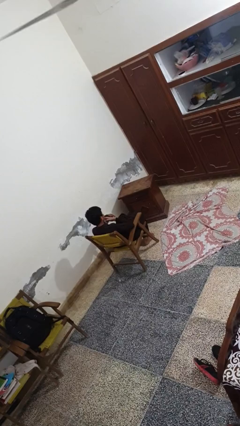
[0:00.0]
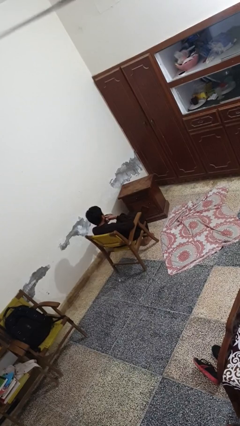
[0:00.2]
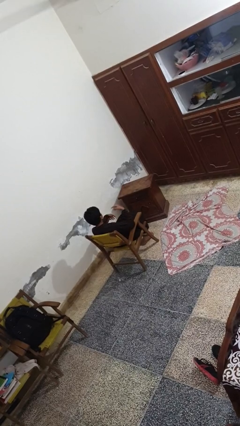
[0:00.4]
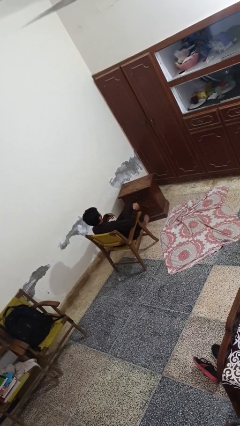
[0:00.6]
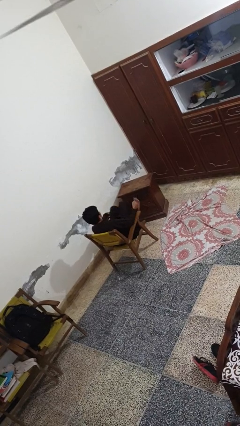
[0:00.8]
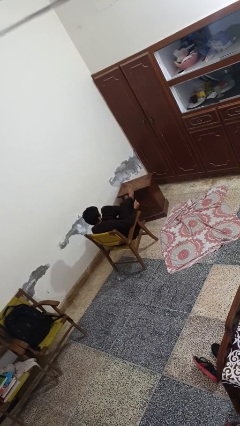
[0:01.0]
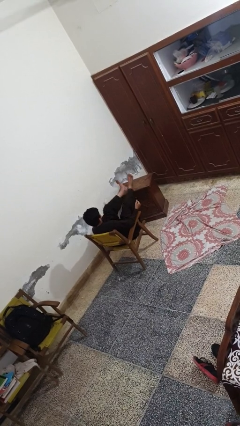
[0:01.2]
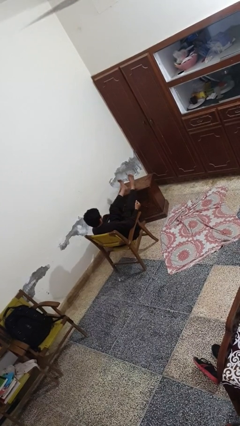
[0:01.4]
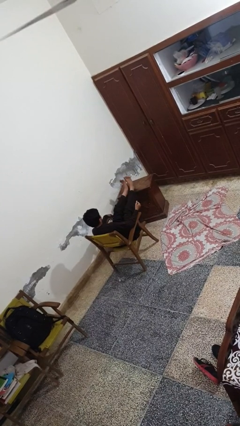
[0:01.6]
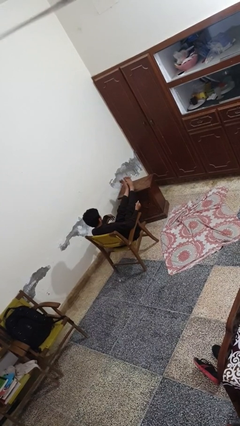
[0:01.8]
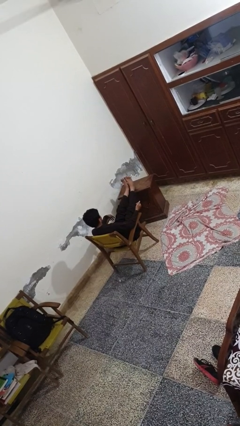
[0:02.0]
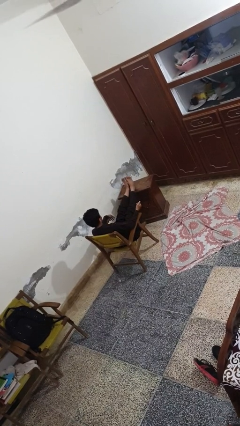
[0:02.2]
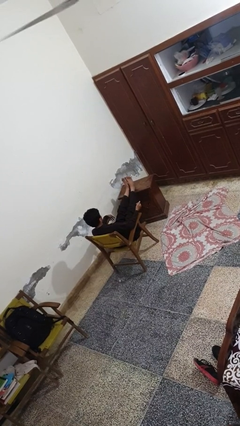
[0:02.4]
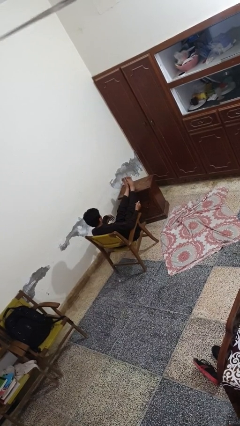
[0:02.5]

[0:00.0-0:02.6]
person puts feet up

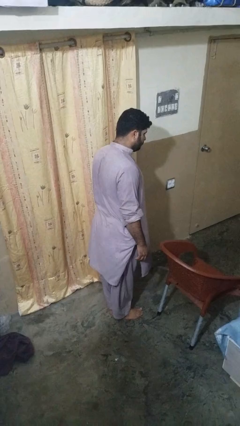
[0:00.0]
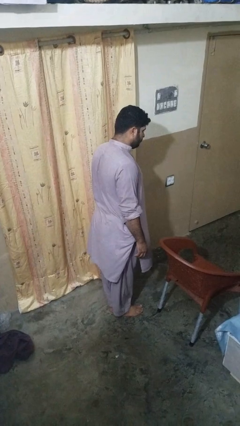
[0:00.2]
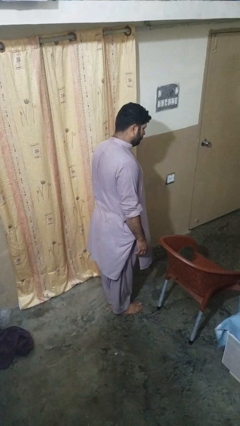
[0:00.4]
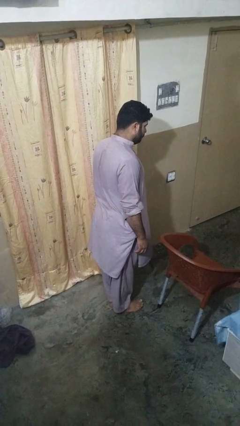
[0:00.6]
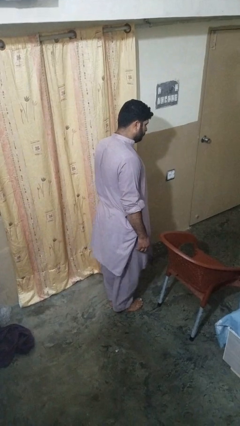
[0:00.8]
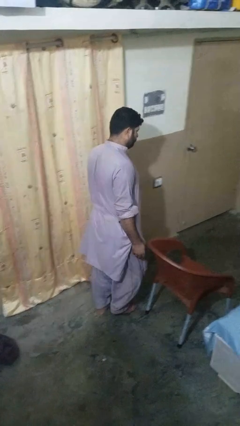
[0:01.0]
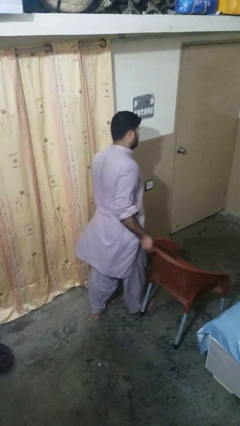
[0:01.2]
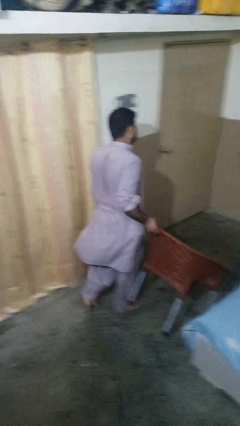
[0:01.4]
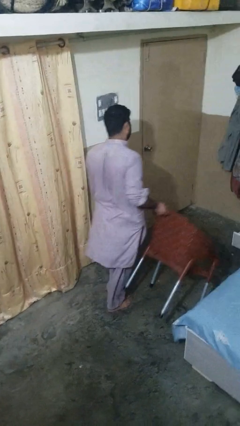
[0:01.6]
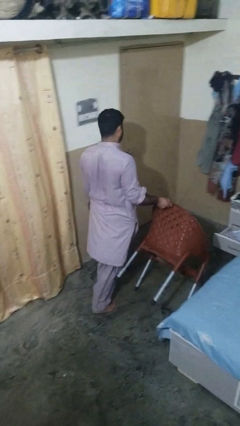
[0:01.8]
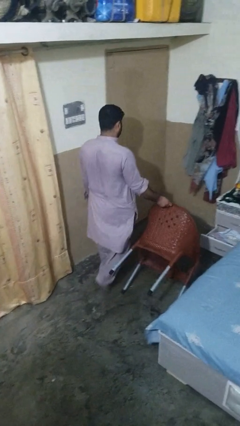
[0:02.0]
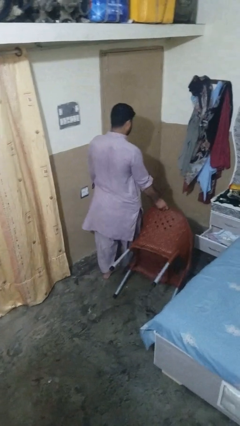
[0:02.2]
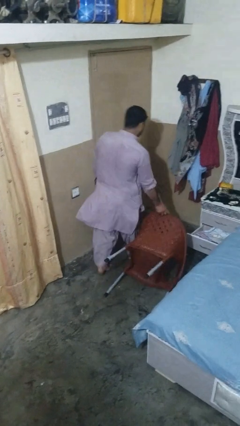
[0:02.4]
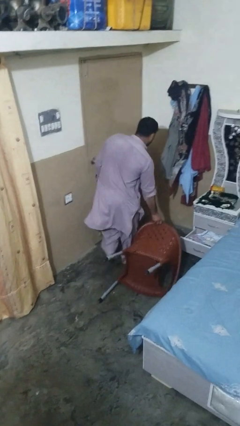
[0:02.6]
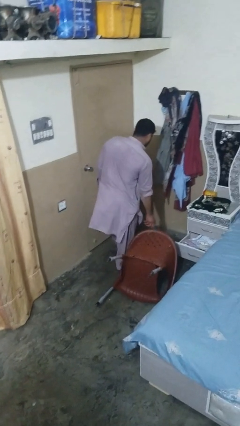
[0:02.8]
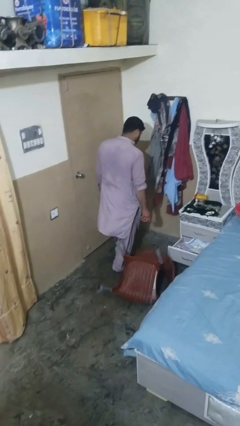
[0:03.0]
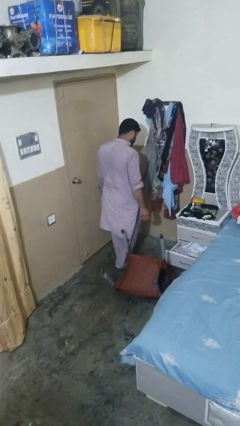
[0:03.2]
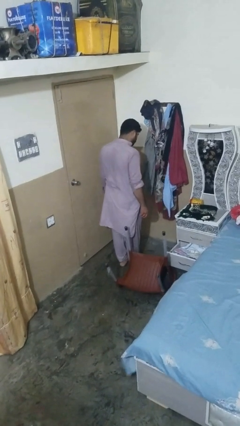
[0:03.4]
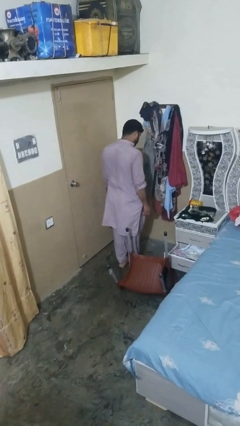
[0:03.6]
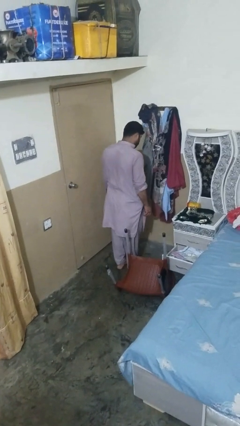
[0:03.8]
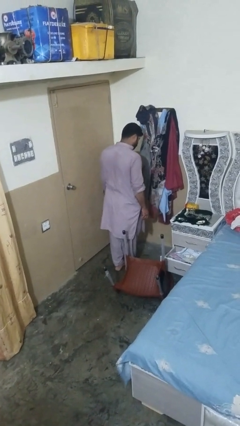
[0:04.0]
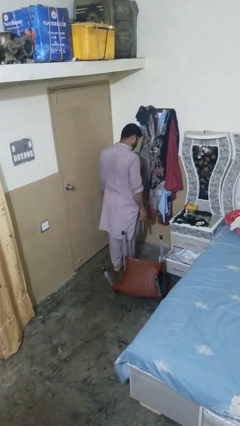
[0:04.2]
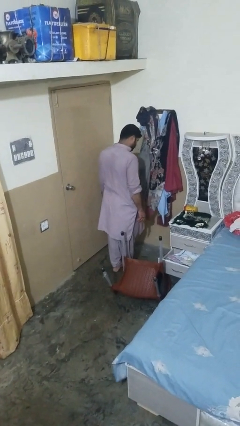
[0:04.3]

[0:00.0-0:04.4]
person knocks over furniture

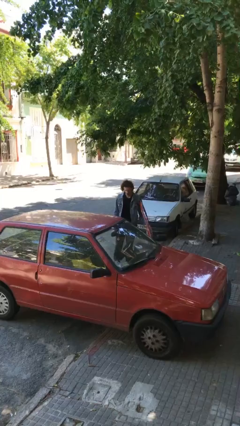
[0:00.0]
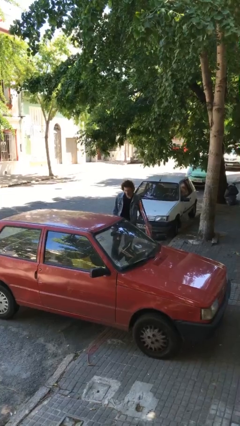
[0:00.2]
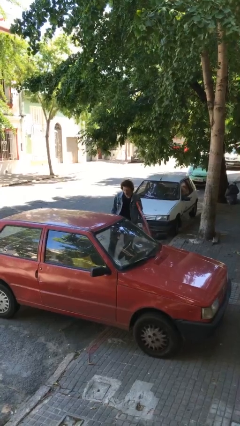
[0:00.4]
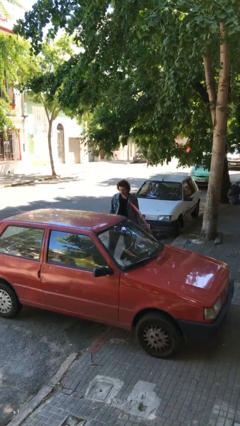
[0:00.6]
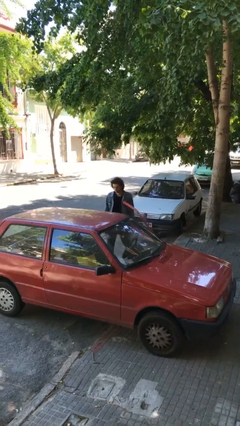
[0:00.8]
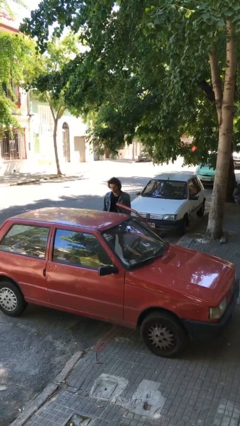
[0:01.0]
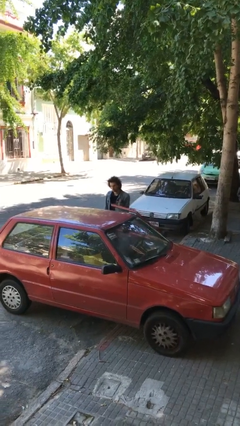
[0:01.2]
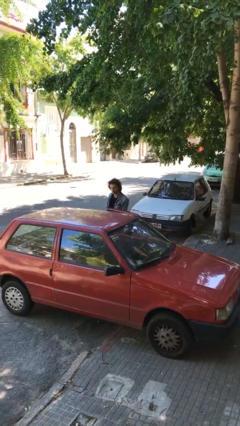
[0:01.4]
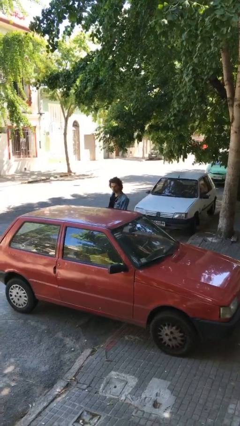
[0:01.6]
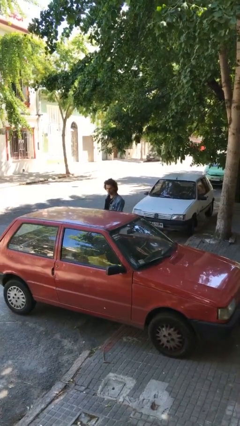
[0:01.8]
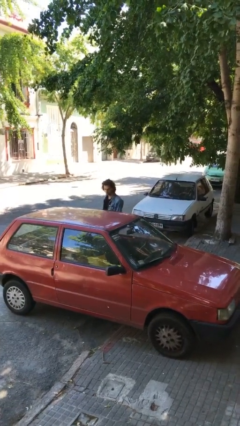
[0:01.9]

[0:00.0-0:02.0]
person closes car door

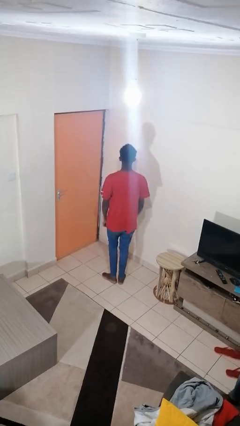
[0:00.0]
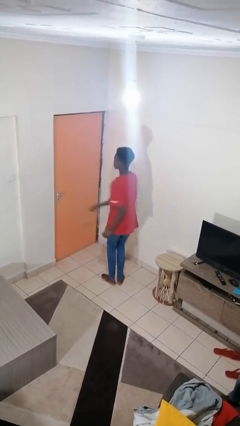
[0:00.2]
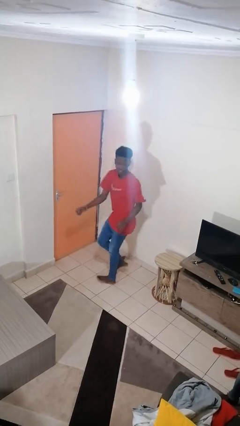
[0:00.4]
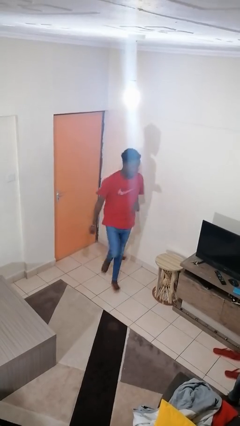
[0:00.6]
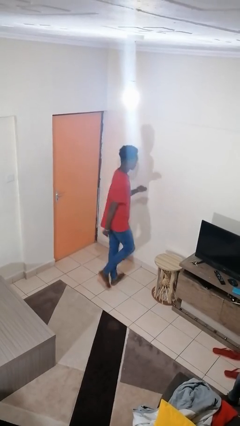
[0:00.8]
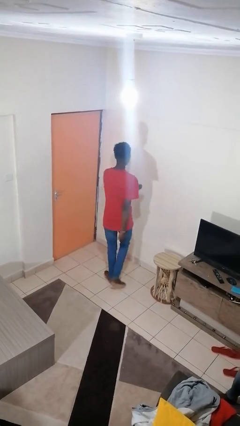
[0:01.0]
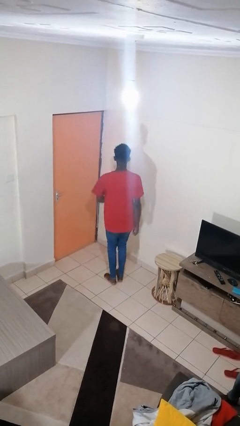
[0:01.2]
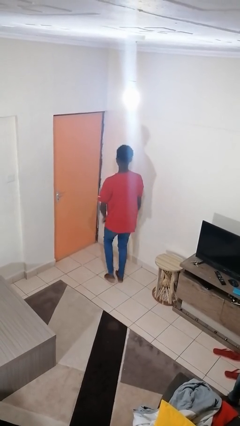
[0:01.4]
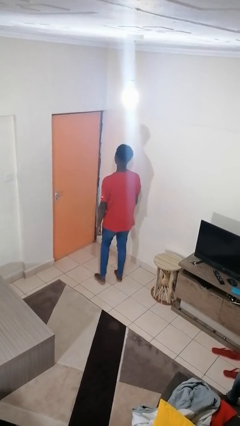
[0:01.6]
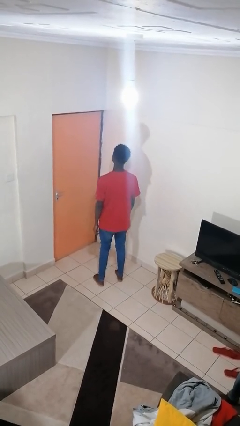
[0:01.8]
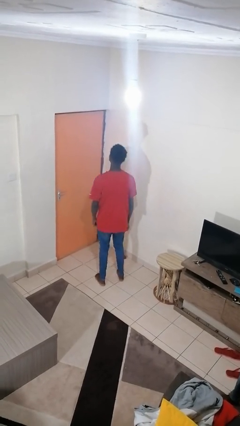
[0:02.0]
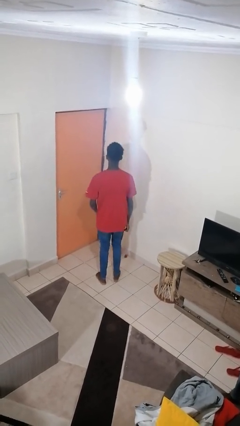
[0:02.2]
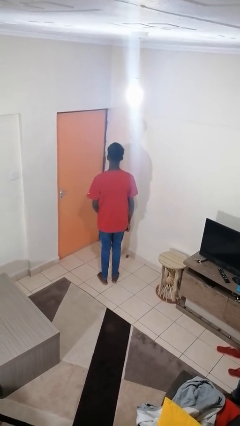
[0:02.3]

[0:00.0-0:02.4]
person twirls

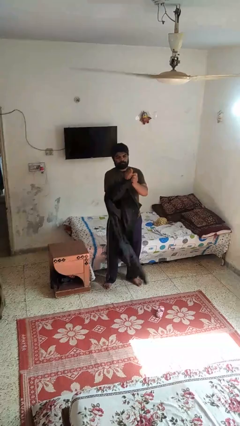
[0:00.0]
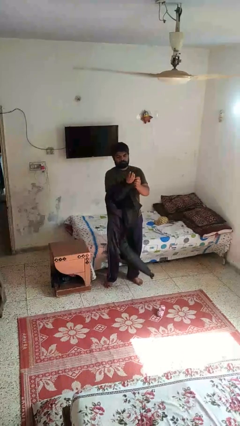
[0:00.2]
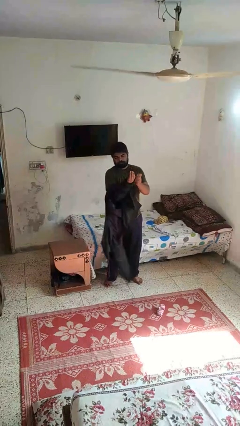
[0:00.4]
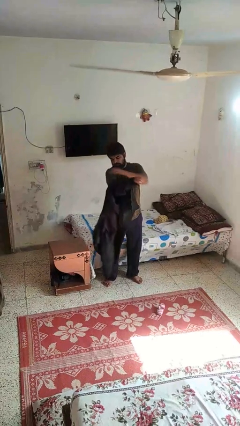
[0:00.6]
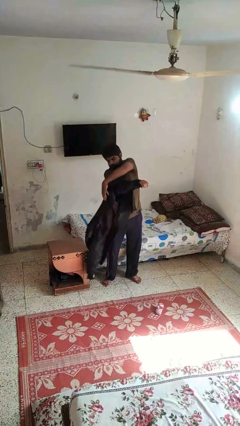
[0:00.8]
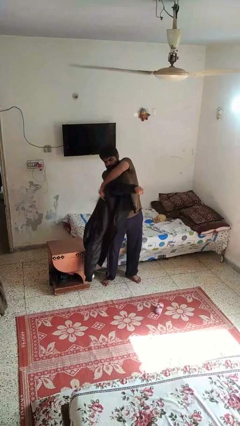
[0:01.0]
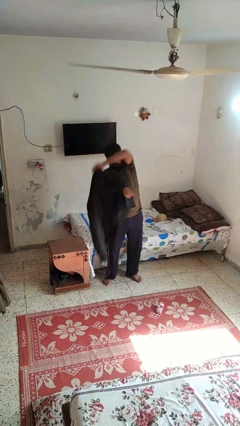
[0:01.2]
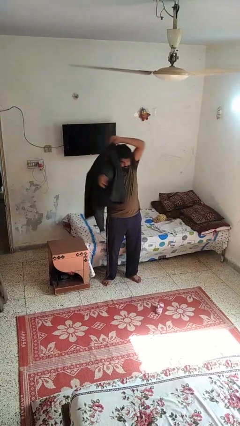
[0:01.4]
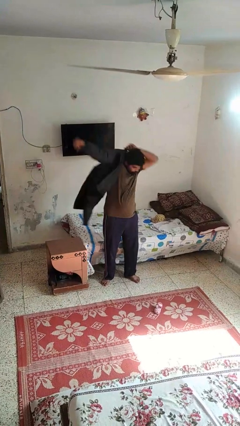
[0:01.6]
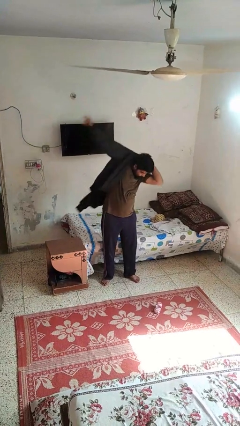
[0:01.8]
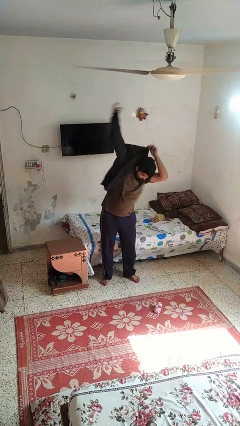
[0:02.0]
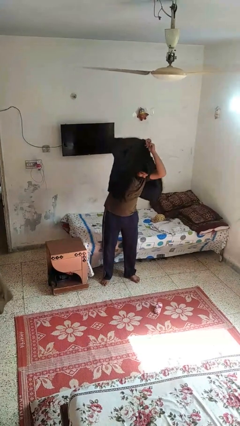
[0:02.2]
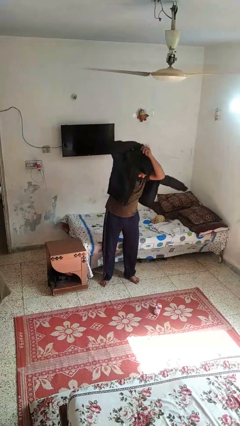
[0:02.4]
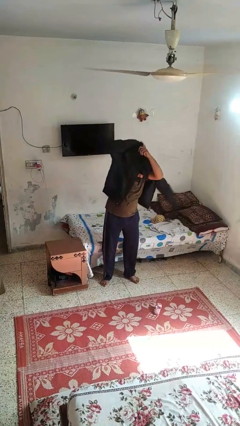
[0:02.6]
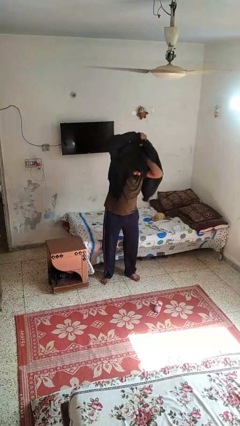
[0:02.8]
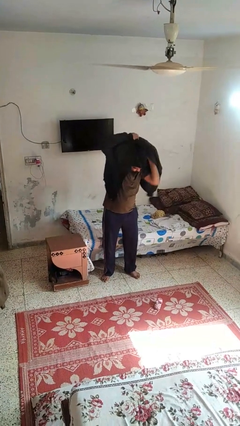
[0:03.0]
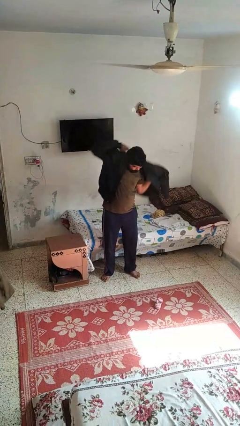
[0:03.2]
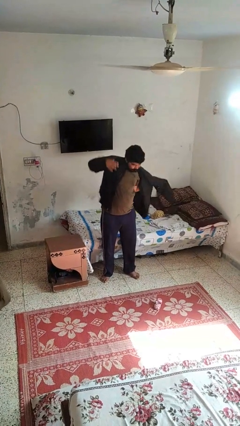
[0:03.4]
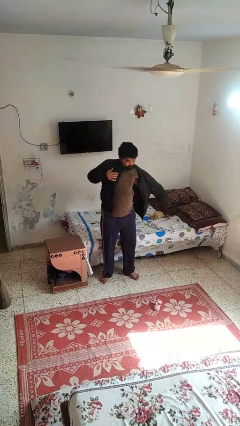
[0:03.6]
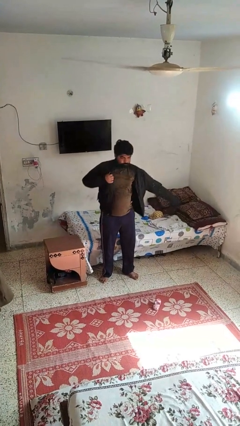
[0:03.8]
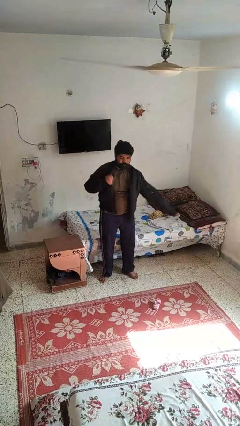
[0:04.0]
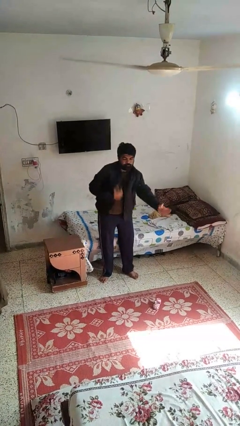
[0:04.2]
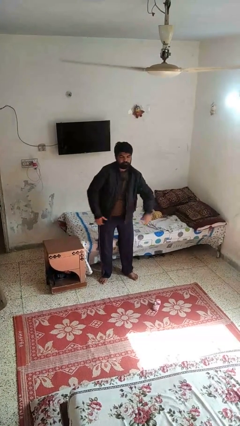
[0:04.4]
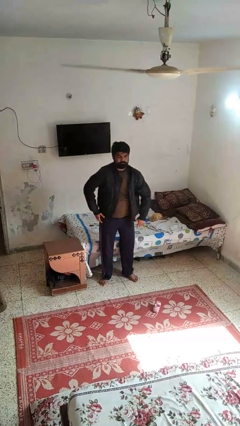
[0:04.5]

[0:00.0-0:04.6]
person puts on jacket

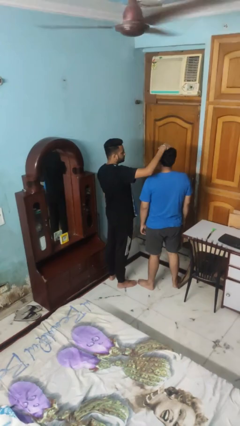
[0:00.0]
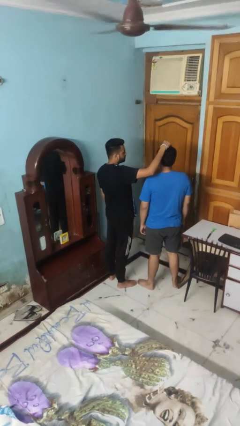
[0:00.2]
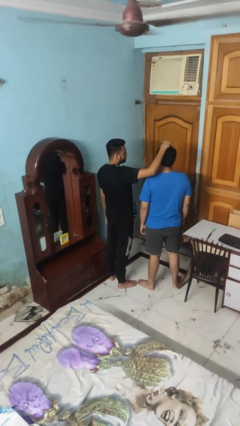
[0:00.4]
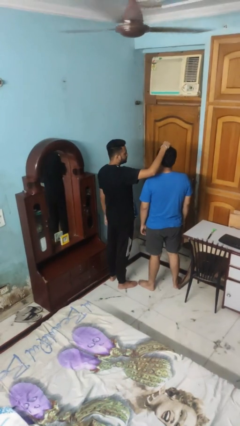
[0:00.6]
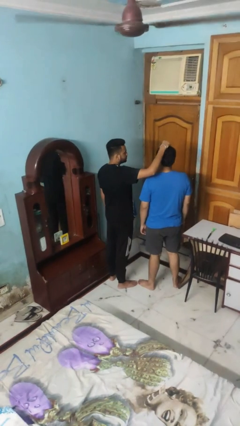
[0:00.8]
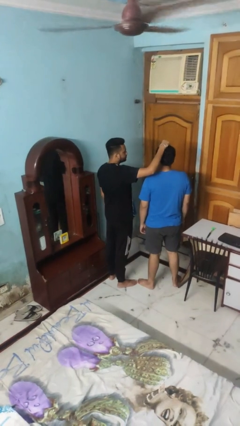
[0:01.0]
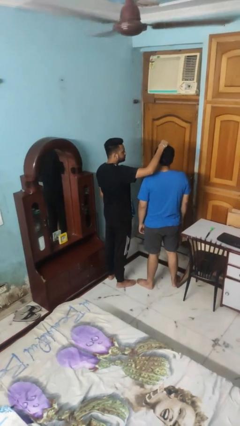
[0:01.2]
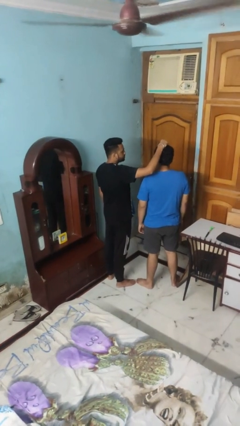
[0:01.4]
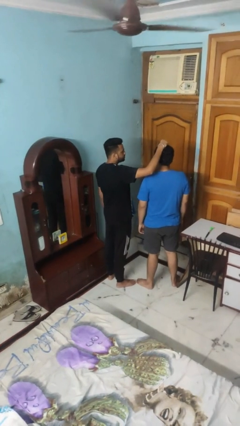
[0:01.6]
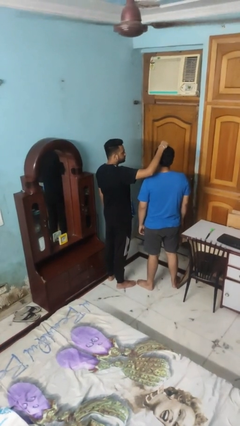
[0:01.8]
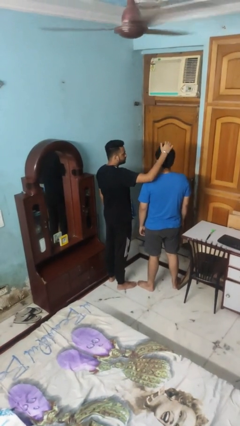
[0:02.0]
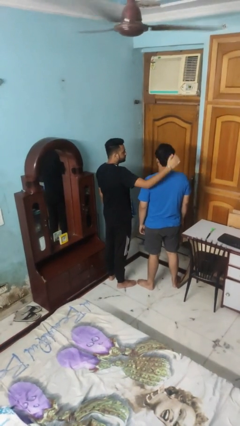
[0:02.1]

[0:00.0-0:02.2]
person grabs person by hair
